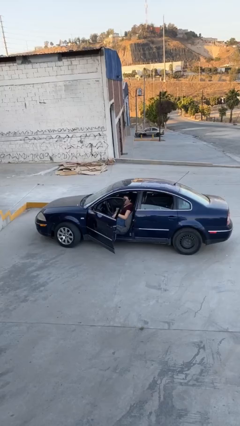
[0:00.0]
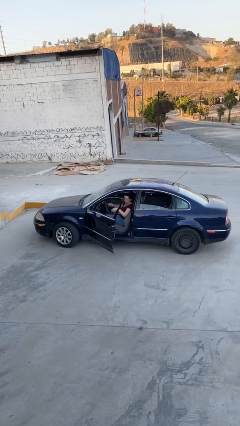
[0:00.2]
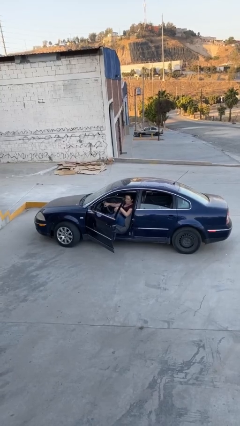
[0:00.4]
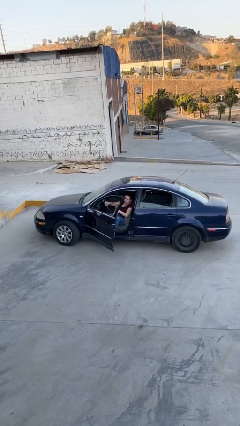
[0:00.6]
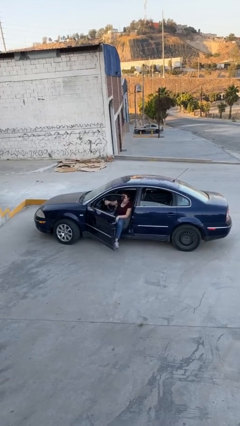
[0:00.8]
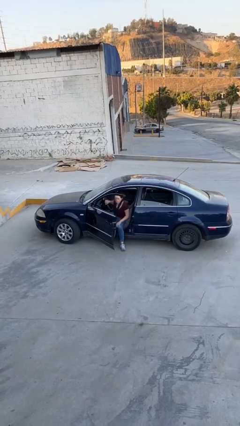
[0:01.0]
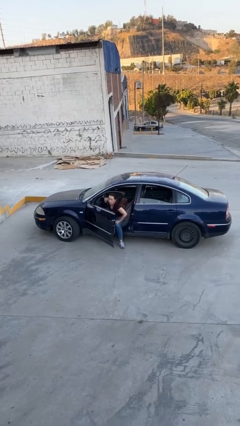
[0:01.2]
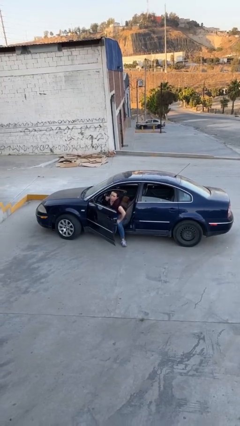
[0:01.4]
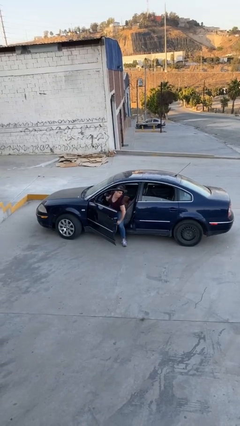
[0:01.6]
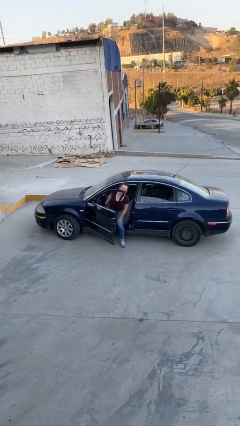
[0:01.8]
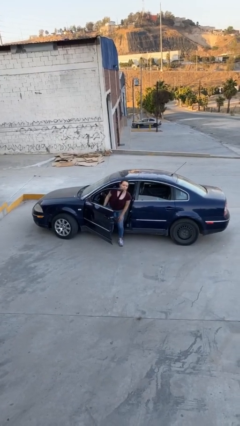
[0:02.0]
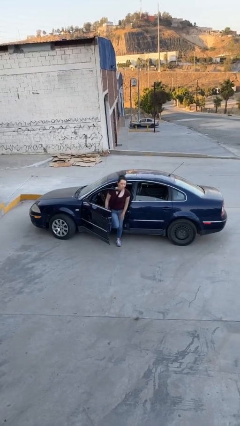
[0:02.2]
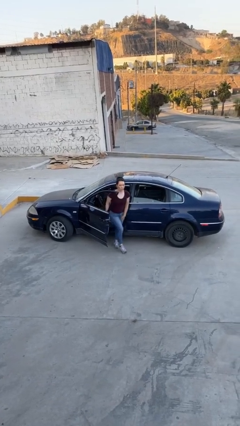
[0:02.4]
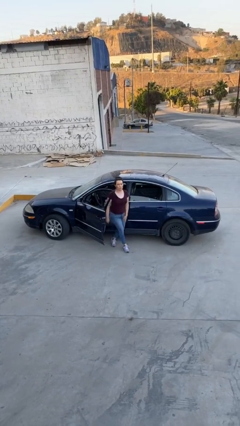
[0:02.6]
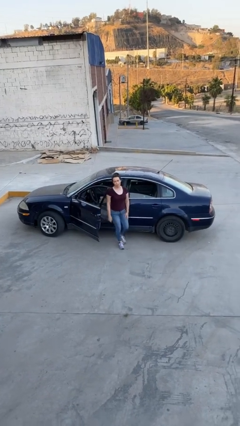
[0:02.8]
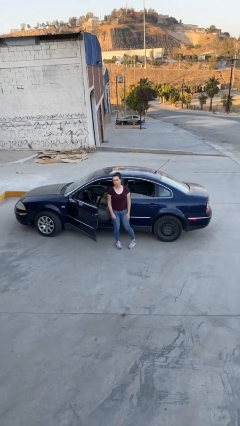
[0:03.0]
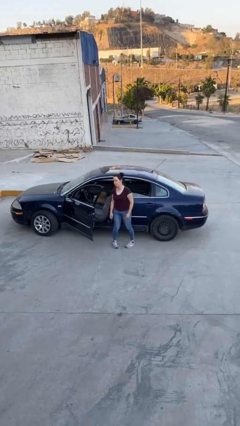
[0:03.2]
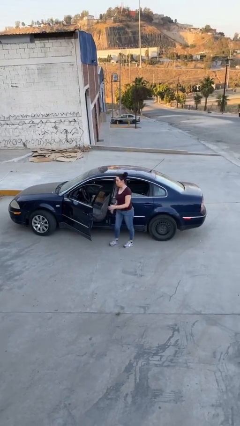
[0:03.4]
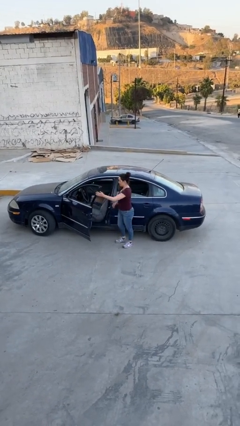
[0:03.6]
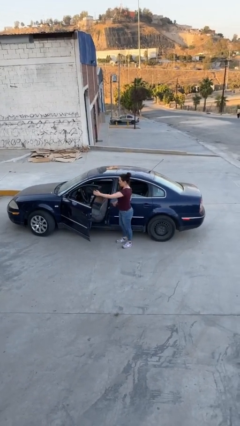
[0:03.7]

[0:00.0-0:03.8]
person exits car

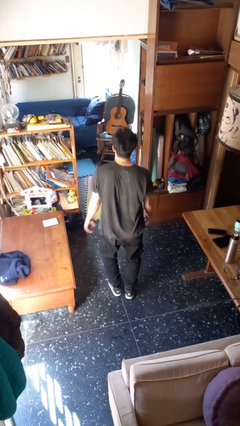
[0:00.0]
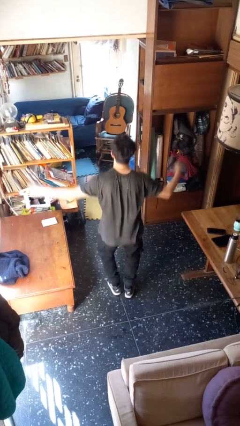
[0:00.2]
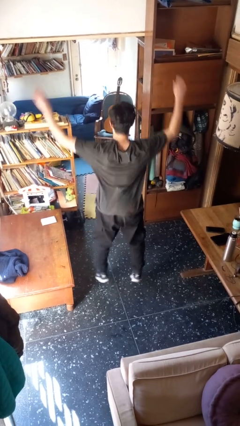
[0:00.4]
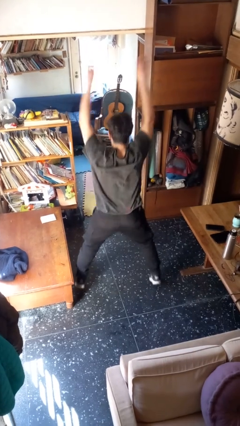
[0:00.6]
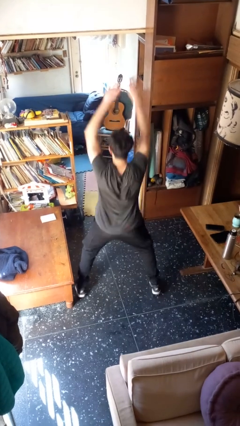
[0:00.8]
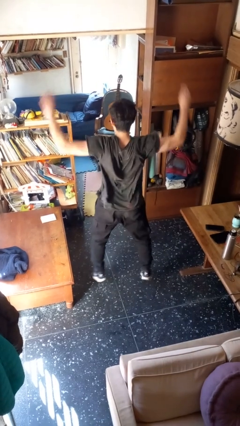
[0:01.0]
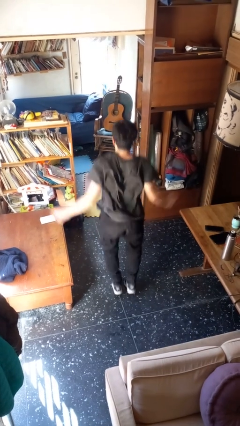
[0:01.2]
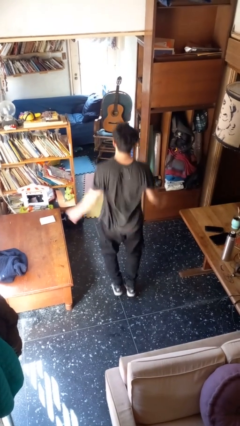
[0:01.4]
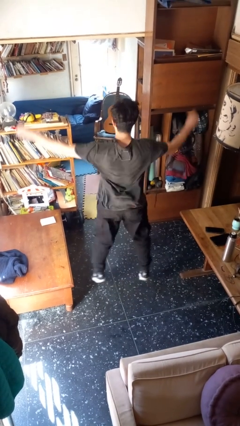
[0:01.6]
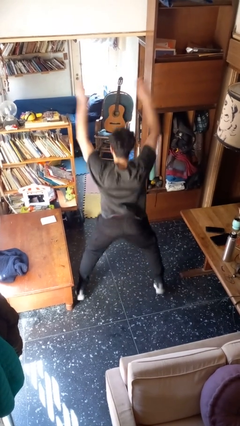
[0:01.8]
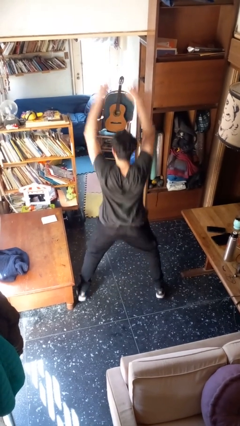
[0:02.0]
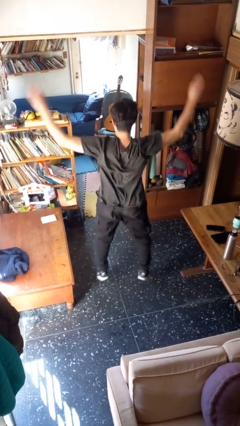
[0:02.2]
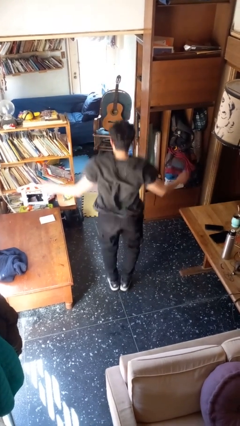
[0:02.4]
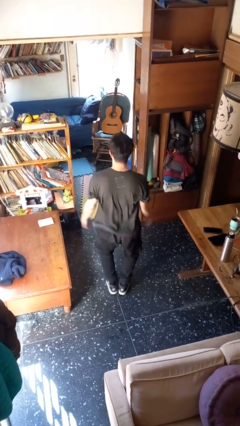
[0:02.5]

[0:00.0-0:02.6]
person exercises with jumping jacks

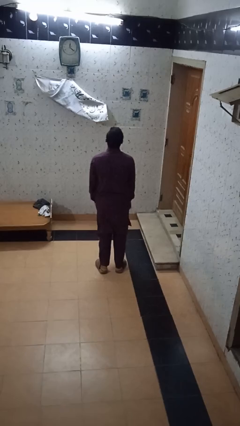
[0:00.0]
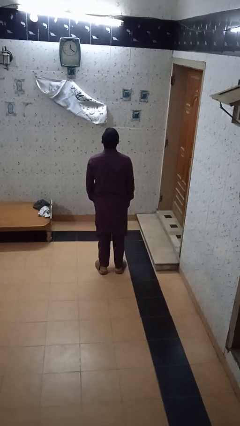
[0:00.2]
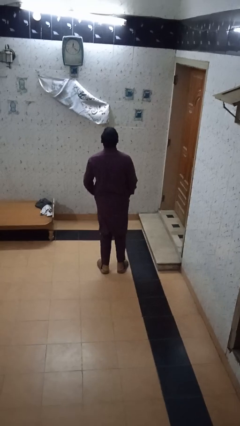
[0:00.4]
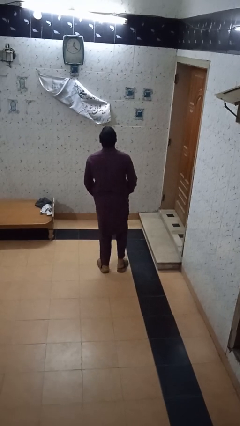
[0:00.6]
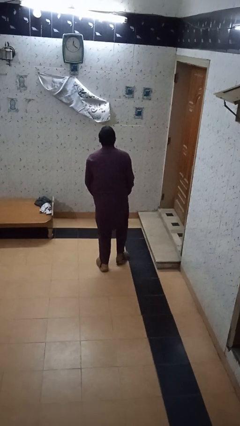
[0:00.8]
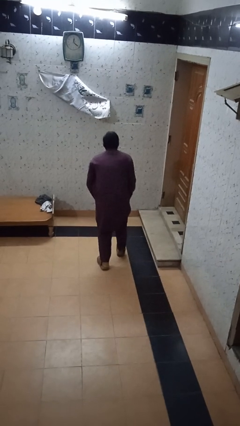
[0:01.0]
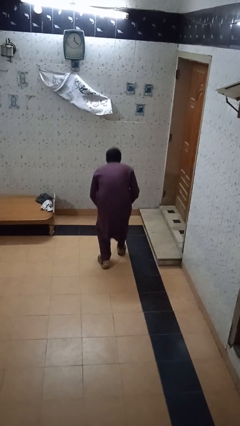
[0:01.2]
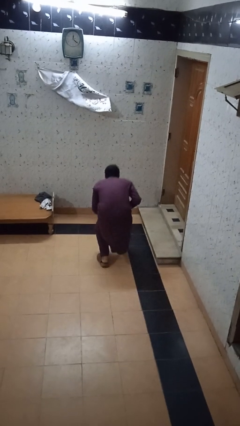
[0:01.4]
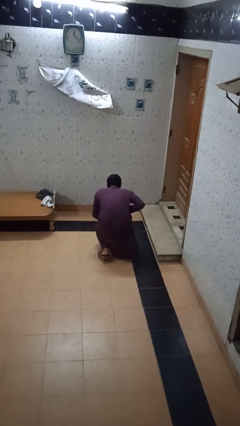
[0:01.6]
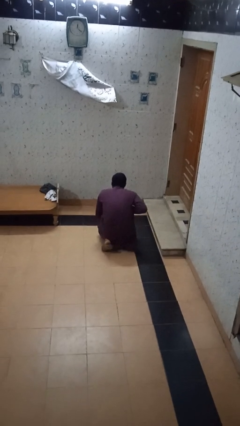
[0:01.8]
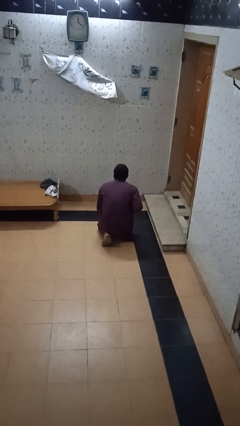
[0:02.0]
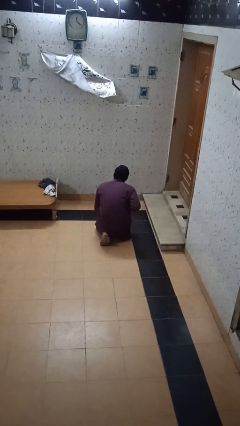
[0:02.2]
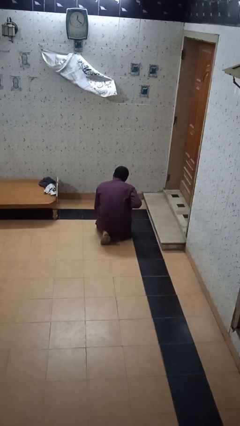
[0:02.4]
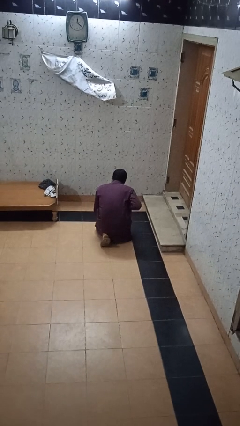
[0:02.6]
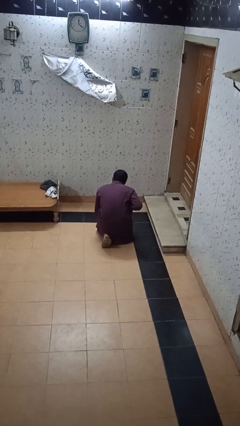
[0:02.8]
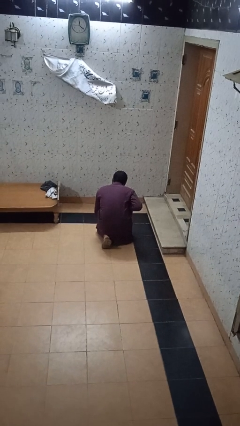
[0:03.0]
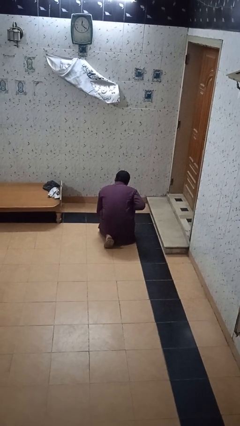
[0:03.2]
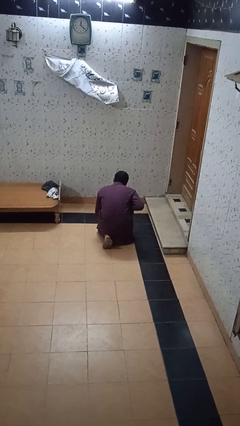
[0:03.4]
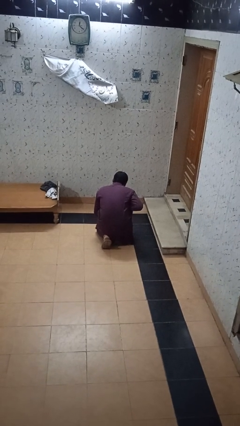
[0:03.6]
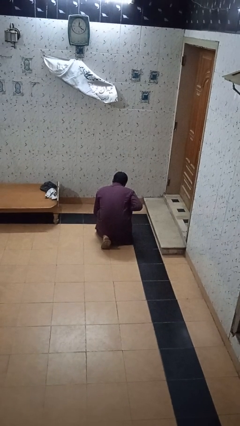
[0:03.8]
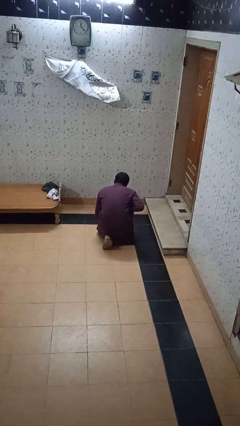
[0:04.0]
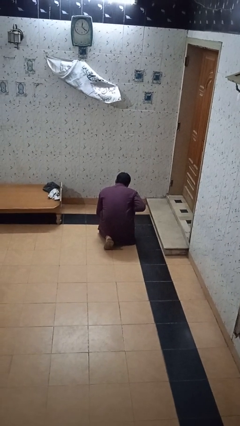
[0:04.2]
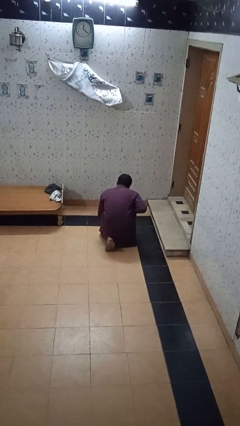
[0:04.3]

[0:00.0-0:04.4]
person kneels

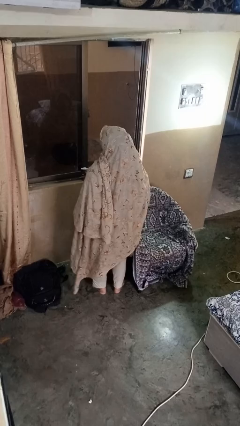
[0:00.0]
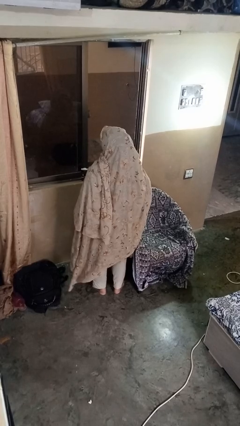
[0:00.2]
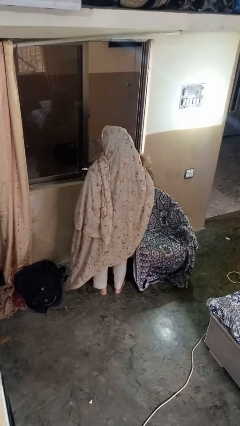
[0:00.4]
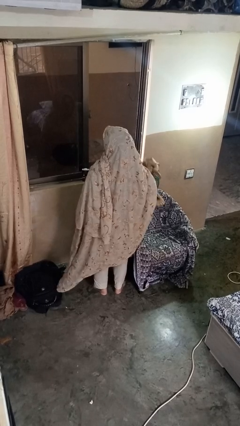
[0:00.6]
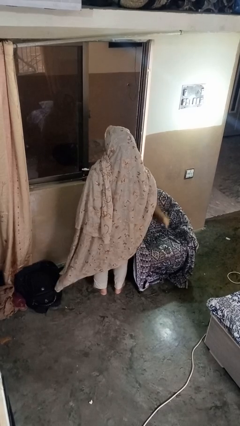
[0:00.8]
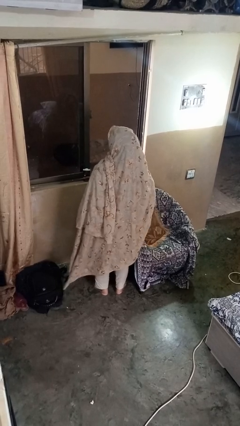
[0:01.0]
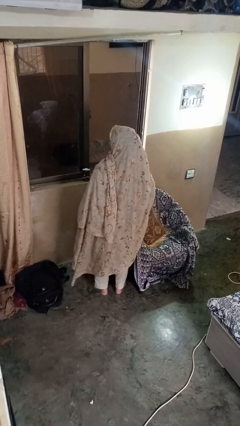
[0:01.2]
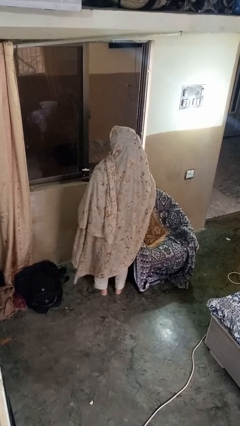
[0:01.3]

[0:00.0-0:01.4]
person puts down object on couch

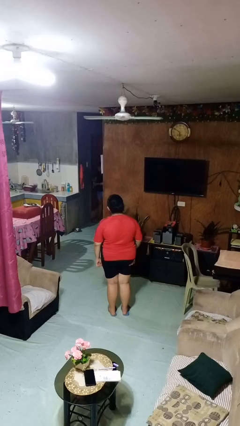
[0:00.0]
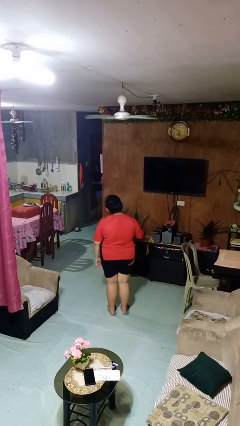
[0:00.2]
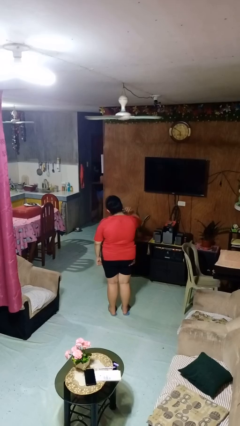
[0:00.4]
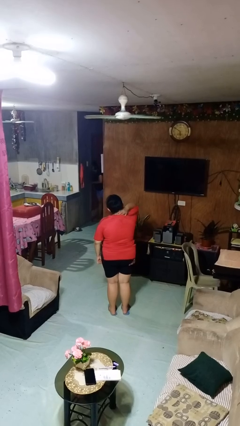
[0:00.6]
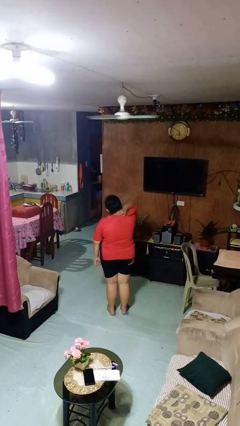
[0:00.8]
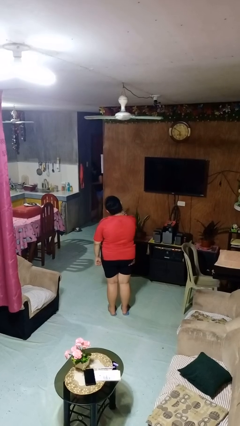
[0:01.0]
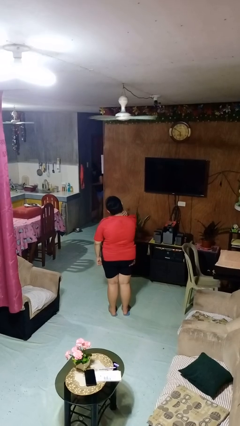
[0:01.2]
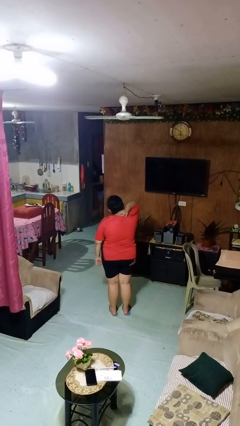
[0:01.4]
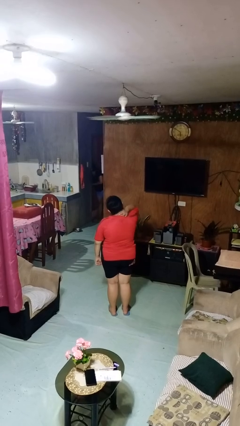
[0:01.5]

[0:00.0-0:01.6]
person rubs neck

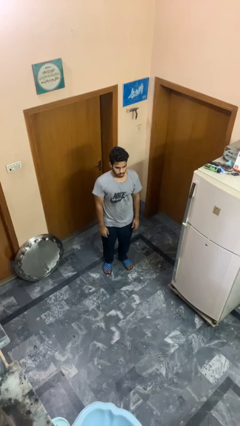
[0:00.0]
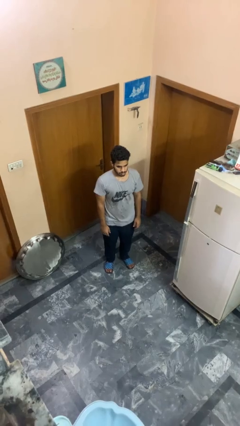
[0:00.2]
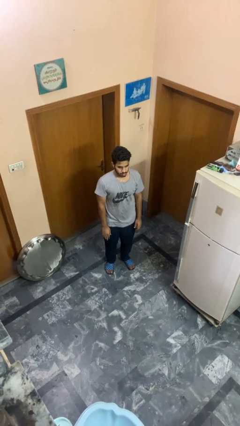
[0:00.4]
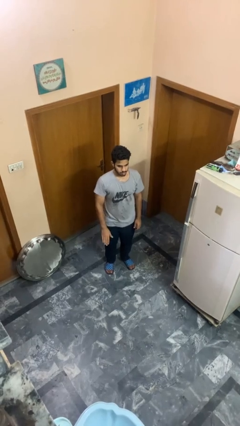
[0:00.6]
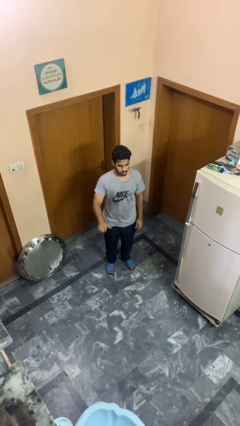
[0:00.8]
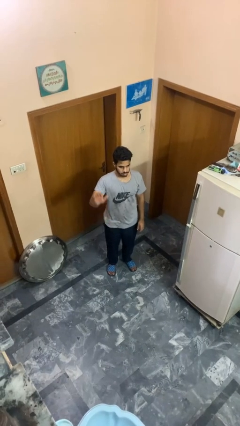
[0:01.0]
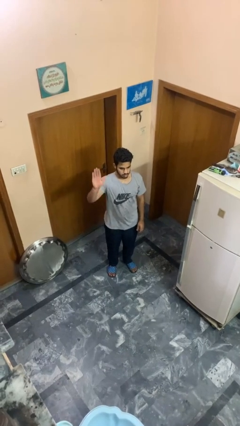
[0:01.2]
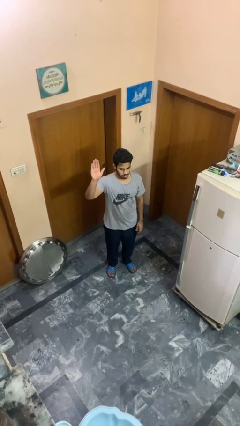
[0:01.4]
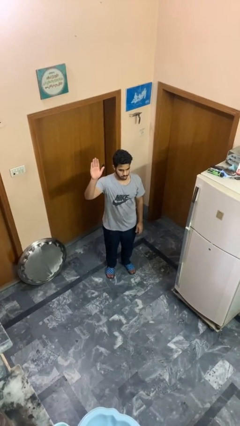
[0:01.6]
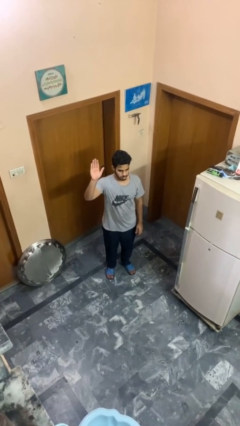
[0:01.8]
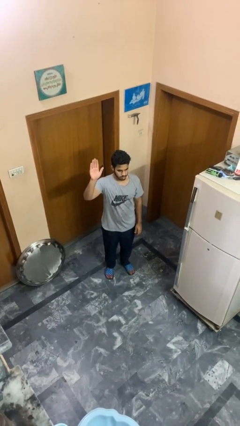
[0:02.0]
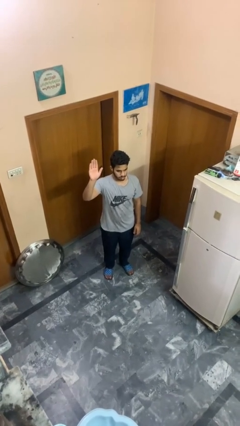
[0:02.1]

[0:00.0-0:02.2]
person gestures raise hand

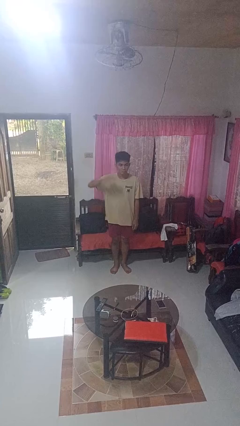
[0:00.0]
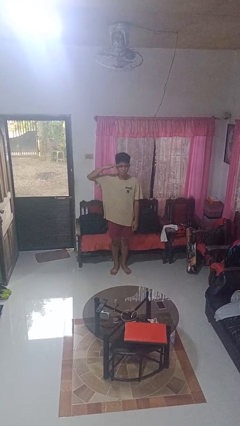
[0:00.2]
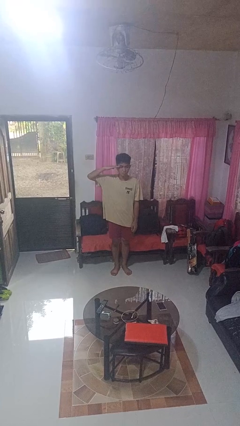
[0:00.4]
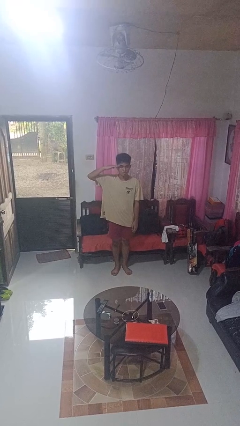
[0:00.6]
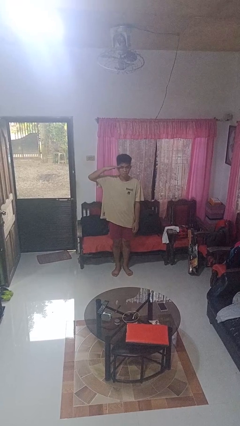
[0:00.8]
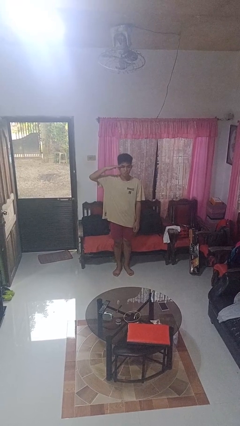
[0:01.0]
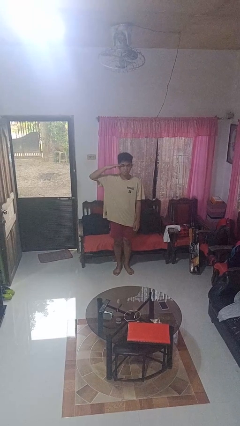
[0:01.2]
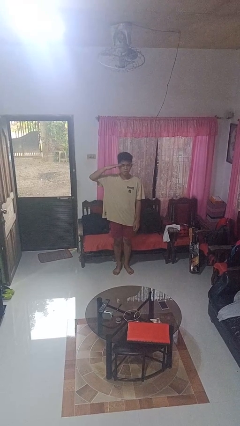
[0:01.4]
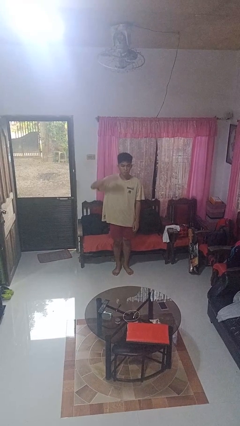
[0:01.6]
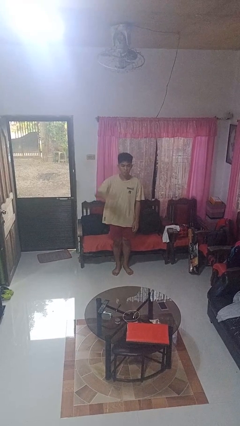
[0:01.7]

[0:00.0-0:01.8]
person salutes
